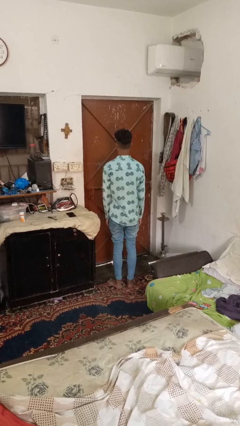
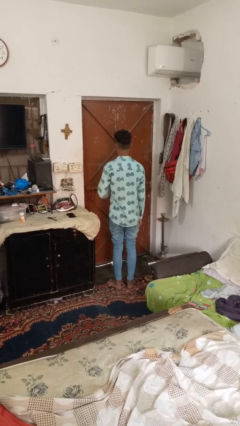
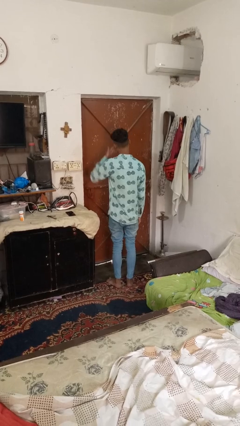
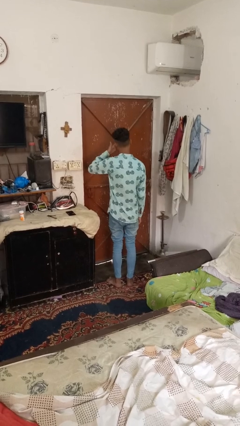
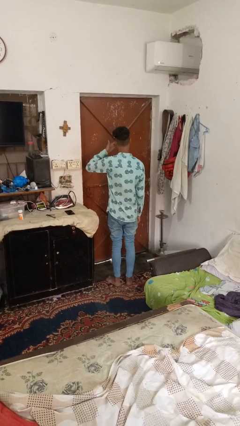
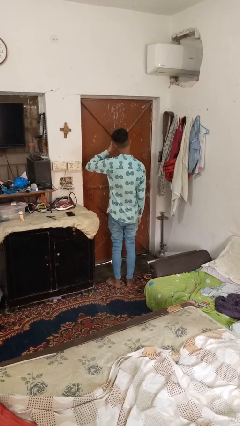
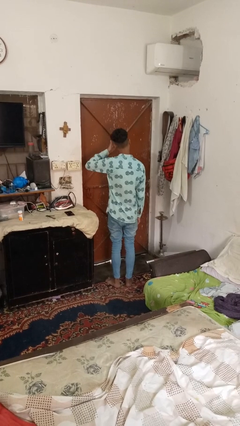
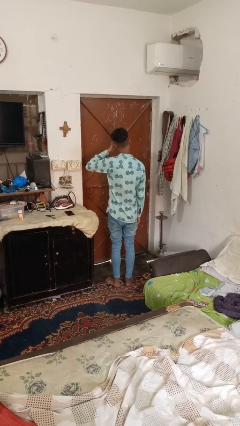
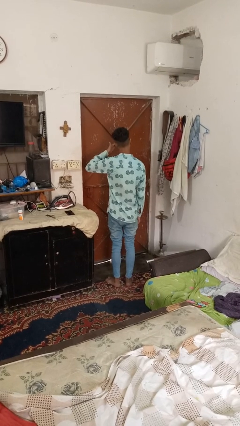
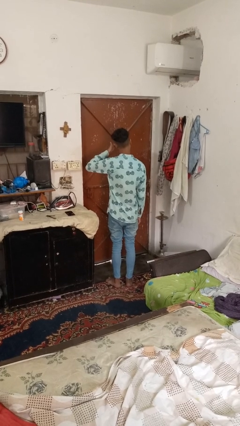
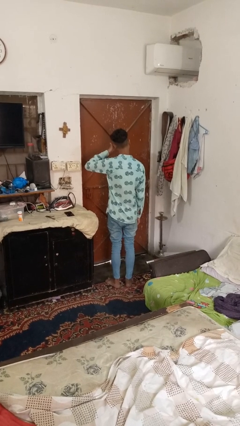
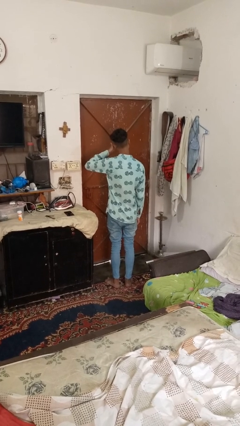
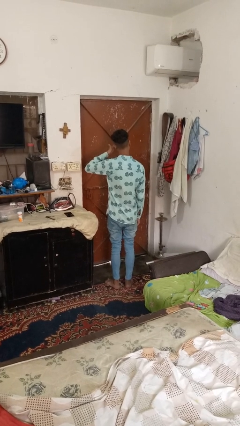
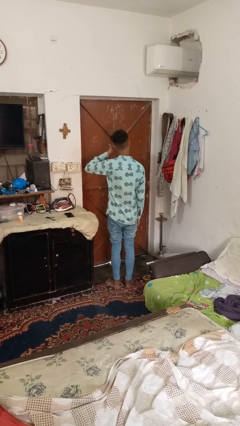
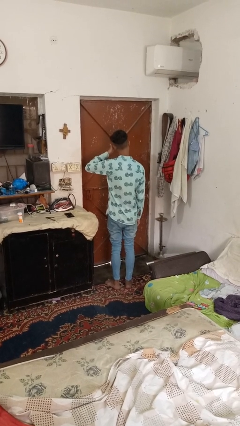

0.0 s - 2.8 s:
person rubs eyes

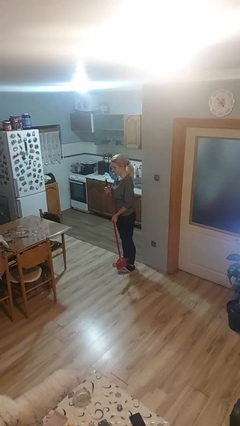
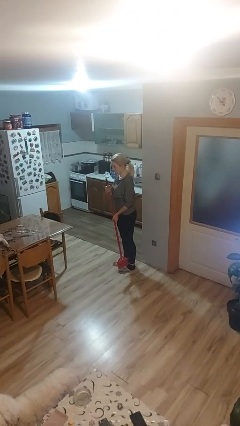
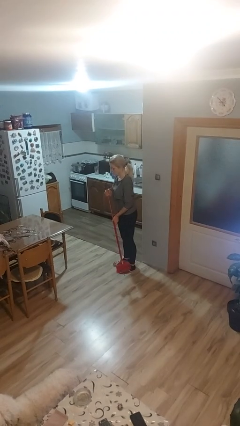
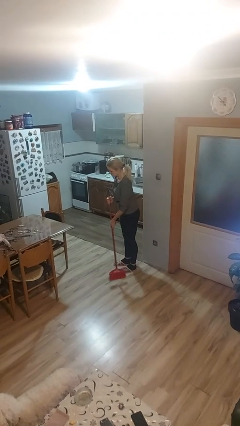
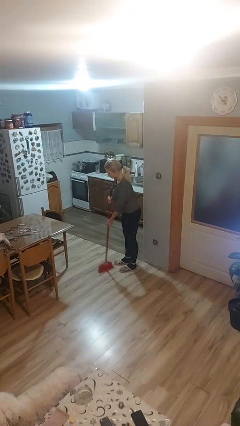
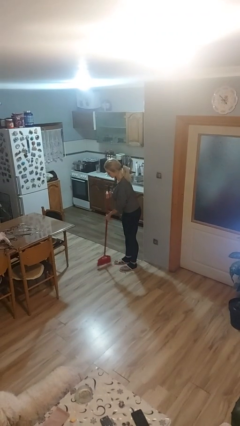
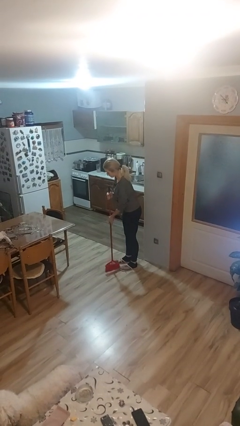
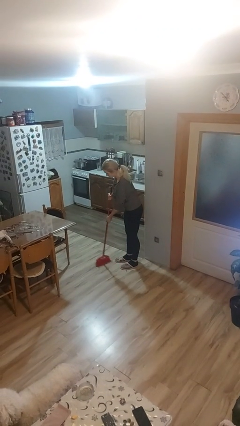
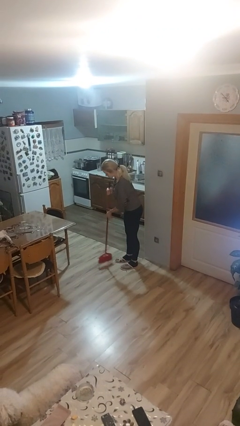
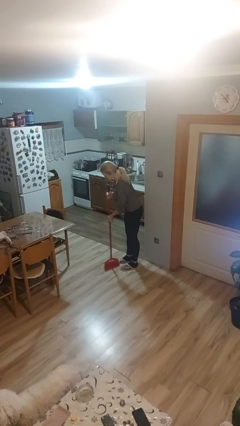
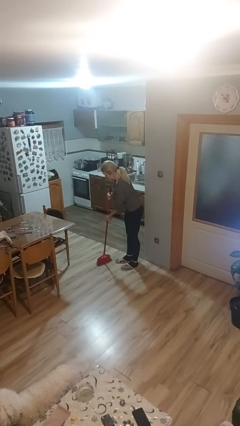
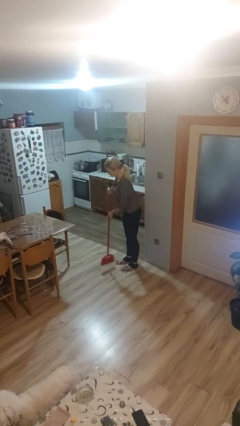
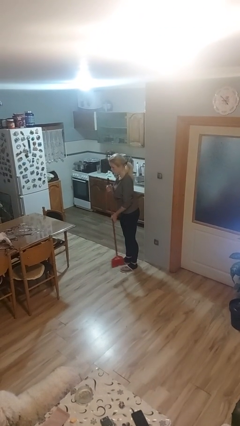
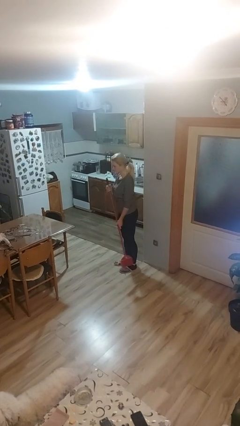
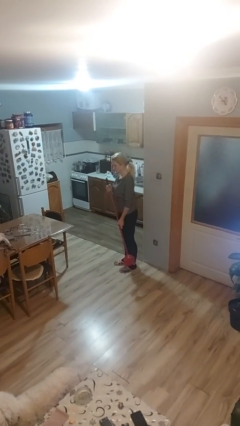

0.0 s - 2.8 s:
person sweeps floor

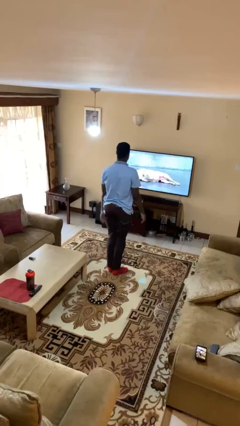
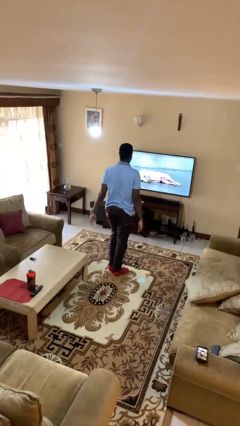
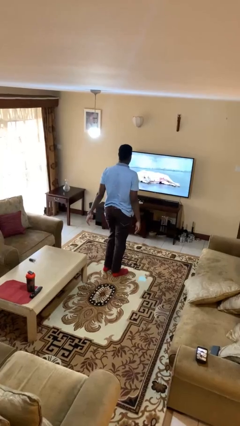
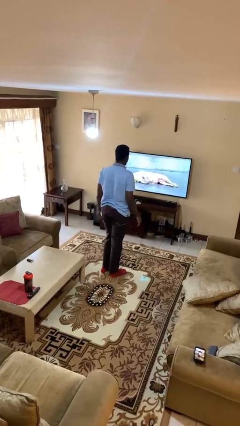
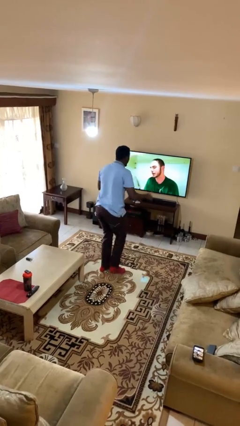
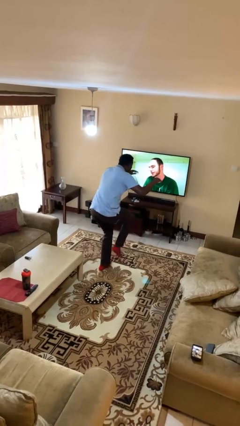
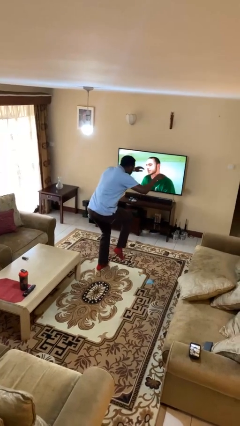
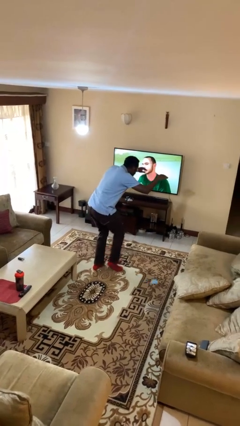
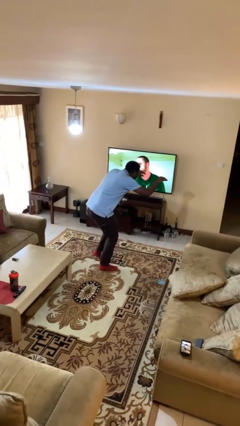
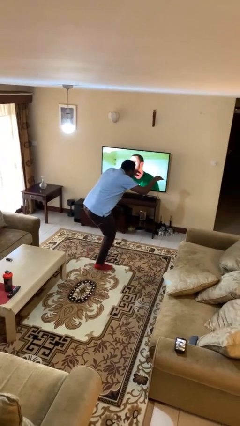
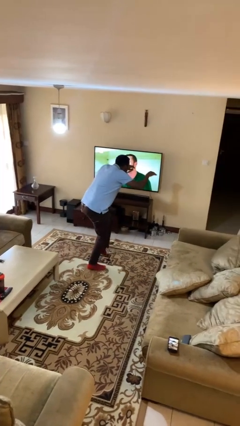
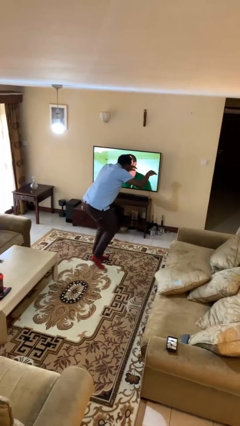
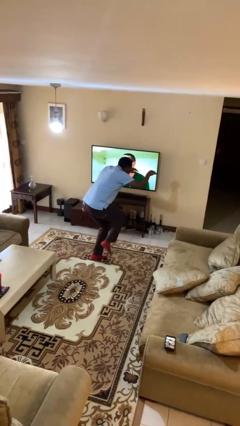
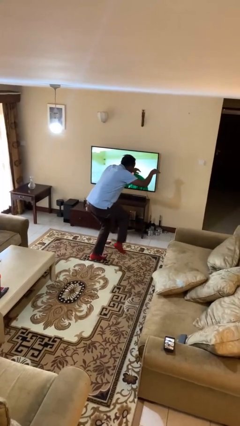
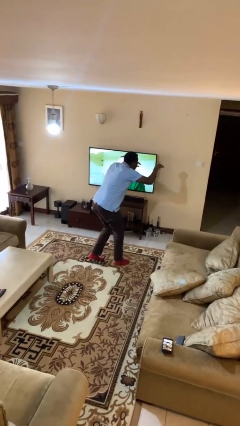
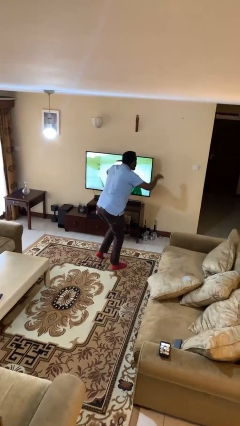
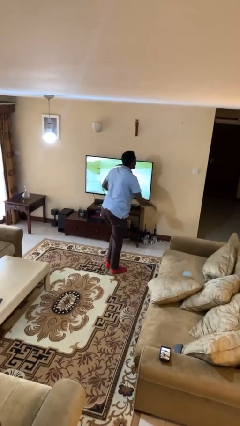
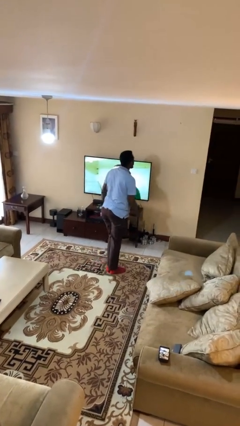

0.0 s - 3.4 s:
person walks tiptoe

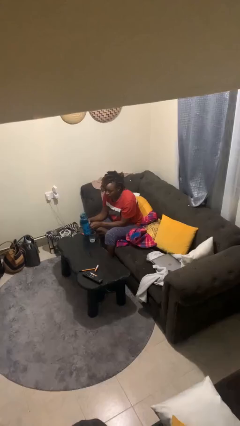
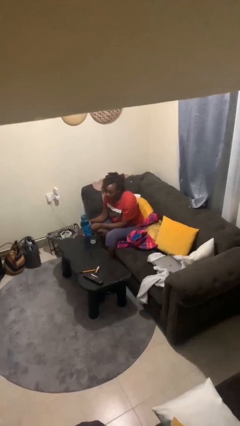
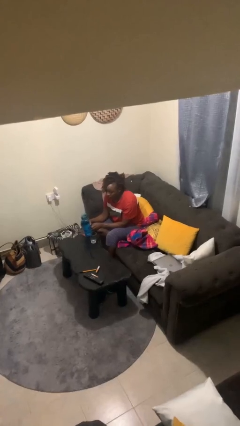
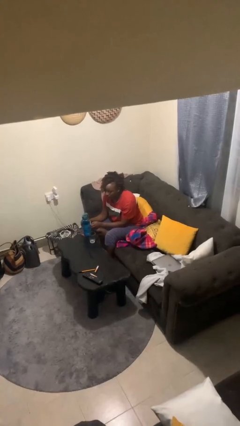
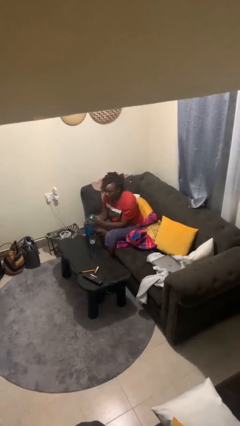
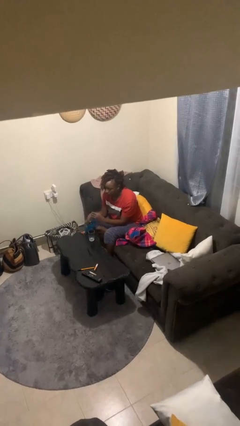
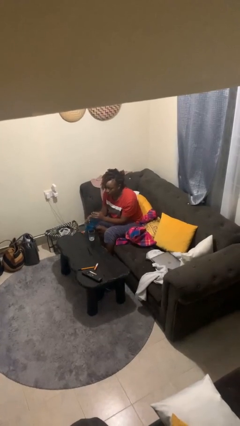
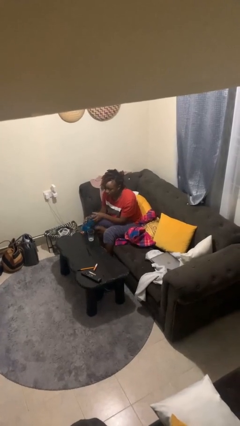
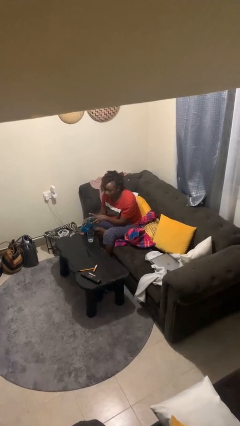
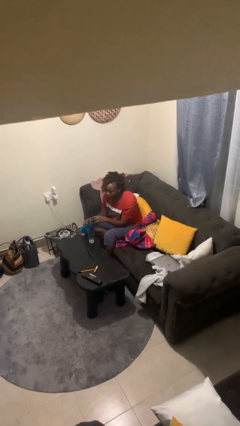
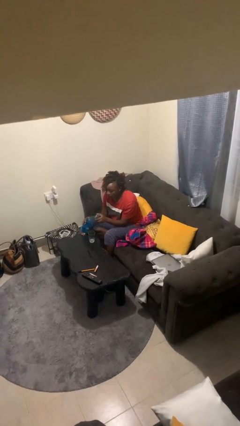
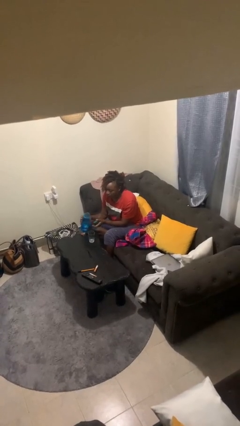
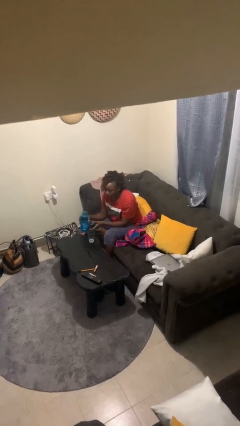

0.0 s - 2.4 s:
person unscrews lid from bottle

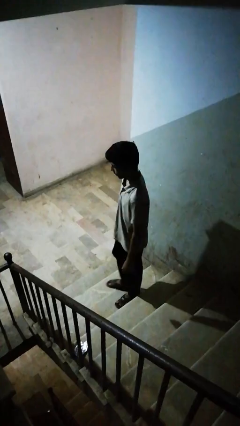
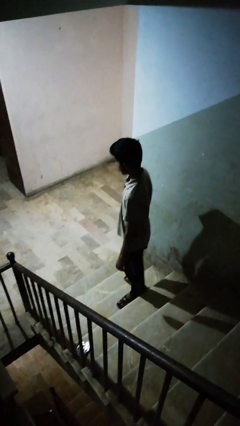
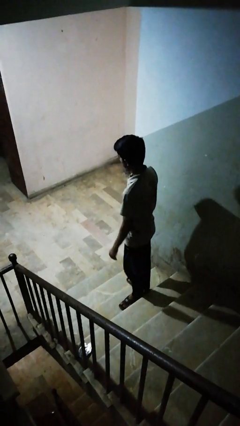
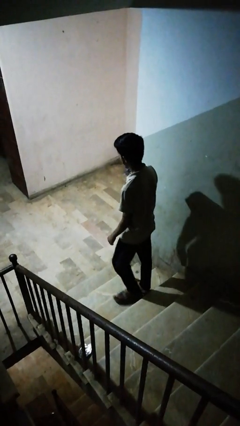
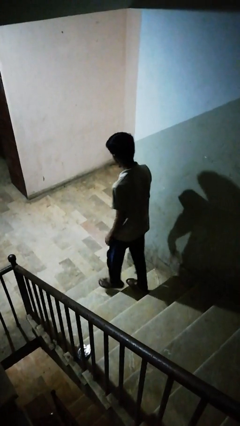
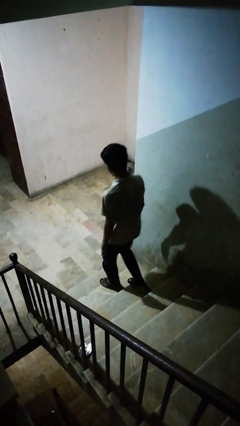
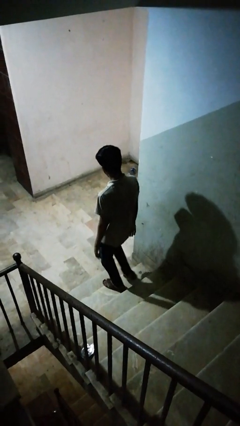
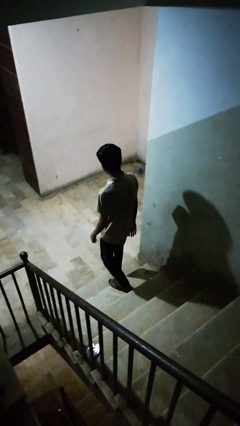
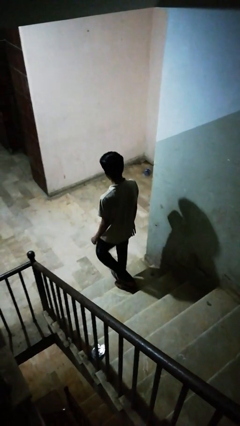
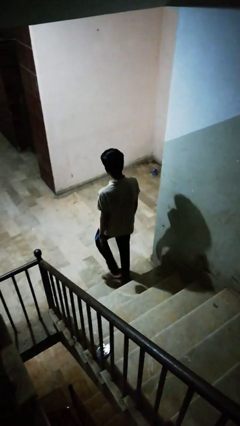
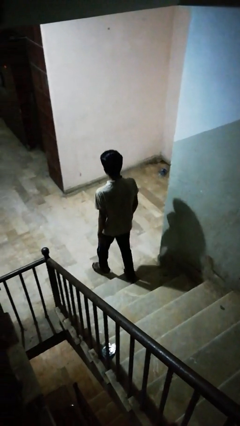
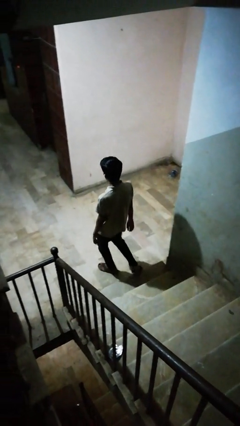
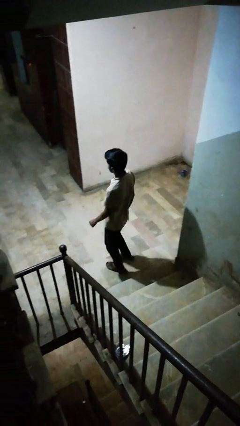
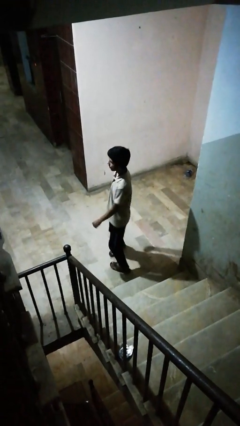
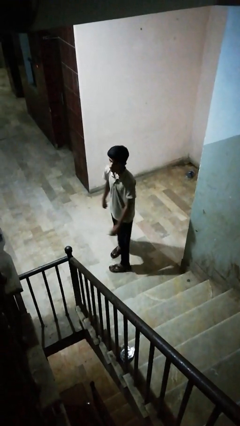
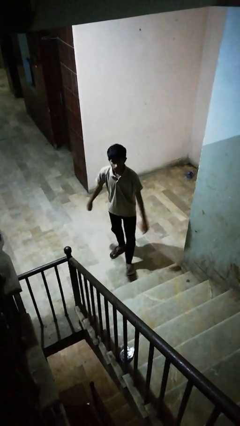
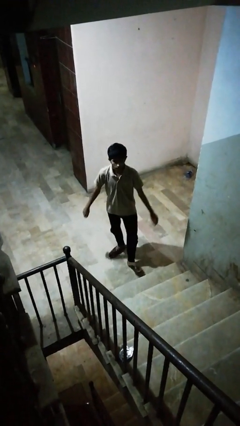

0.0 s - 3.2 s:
person climbs down stairs

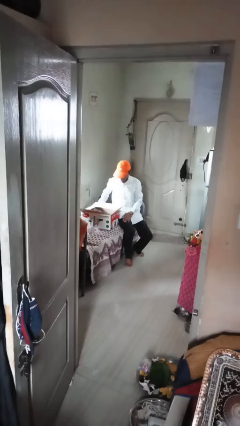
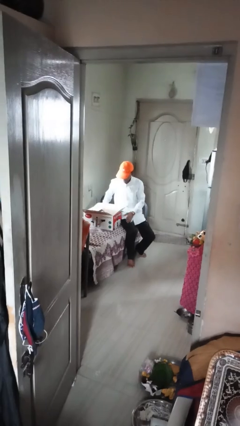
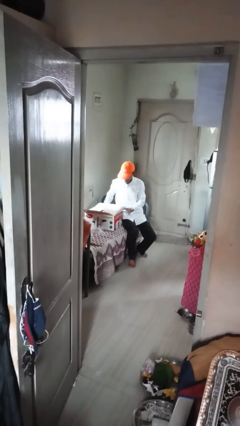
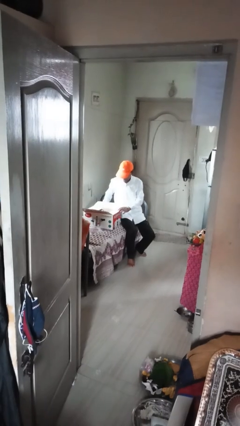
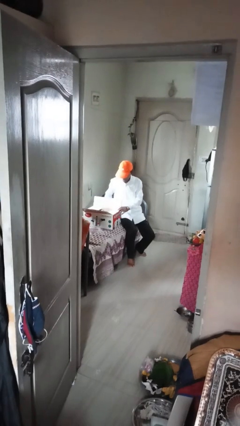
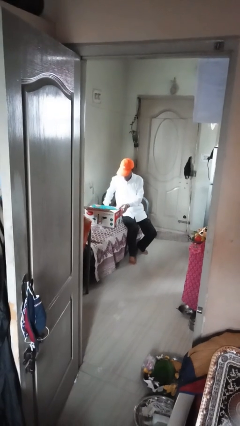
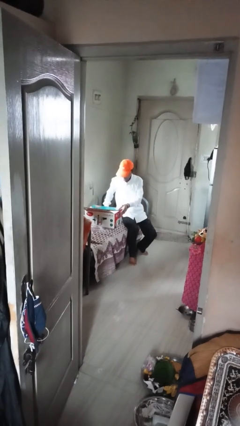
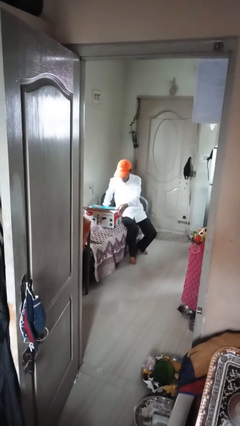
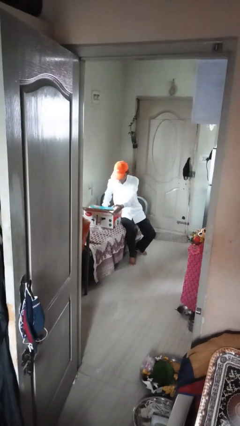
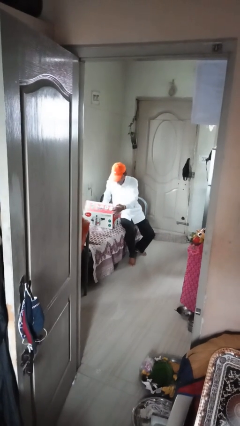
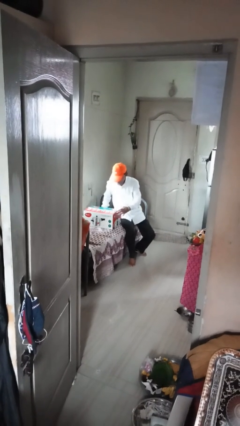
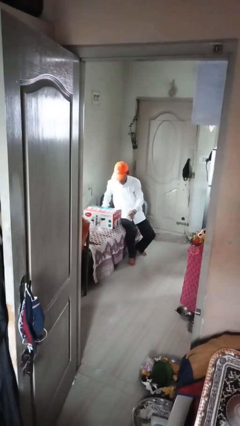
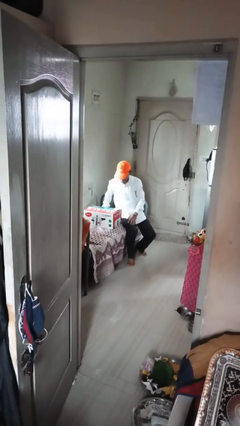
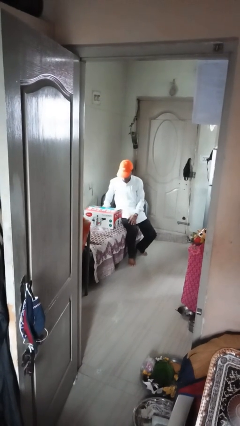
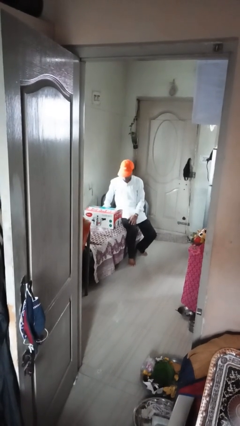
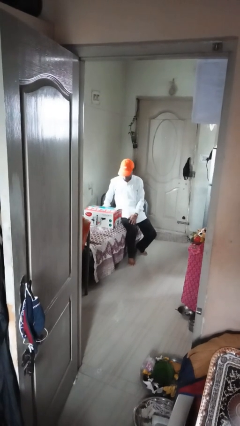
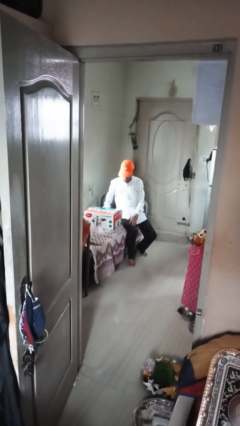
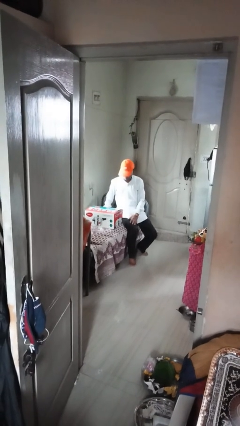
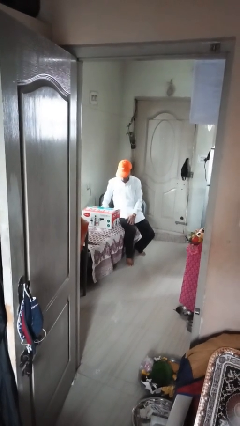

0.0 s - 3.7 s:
person closes box
